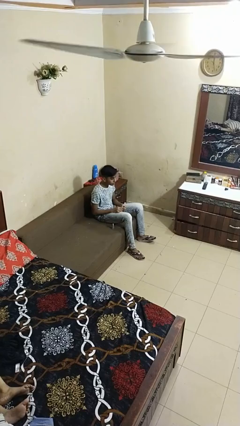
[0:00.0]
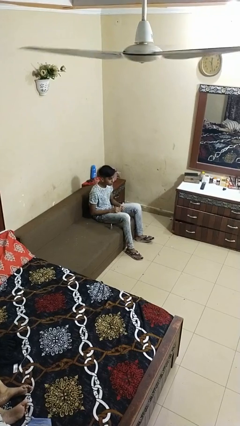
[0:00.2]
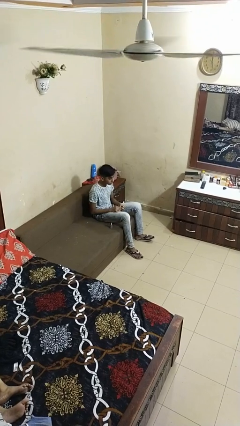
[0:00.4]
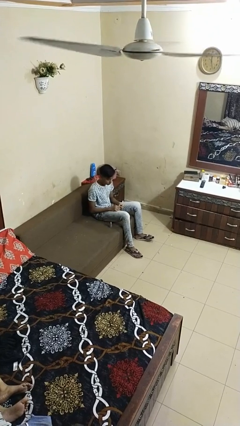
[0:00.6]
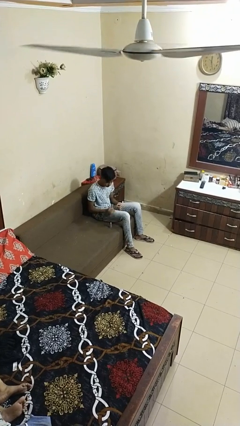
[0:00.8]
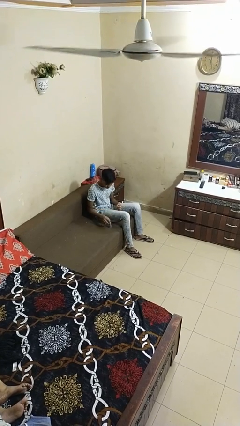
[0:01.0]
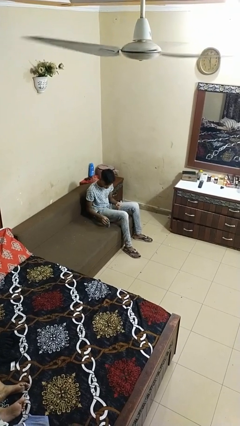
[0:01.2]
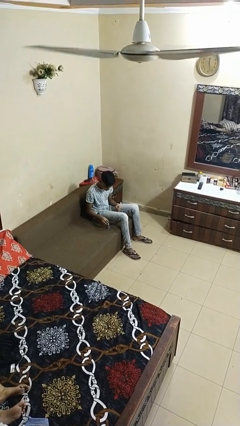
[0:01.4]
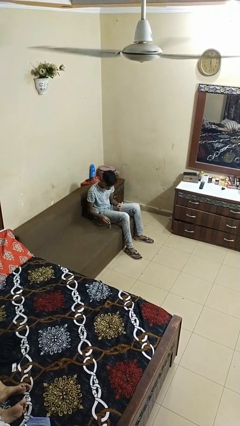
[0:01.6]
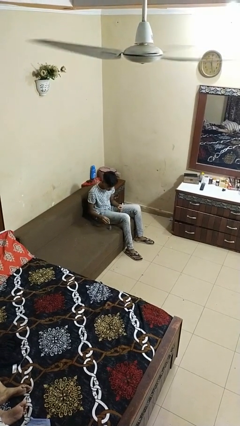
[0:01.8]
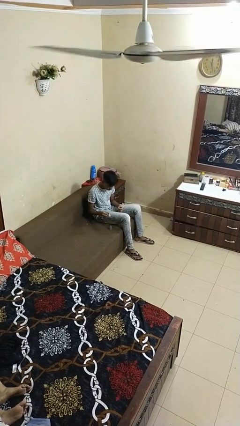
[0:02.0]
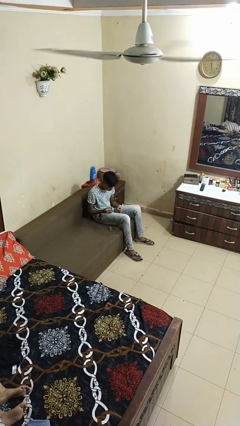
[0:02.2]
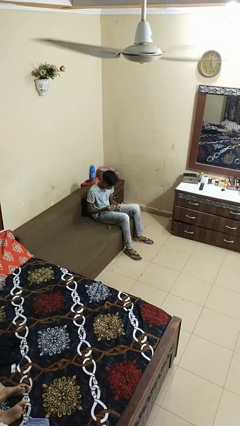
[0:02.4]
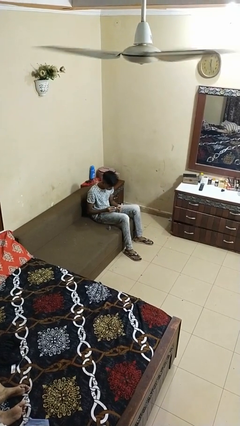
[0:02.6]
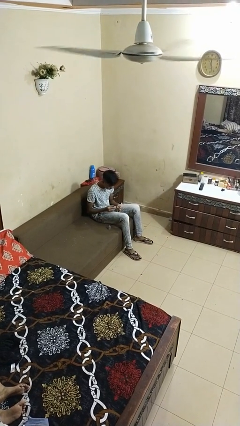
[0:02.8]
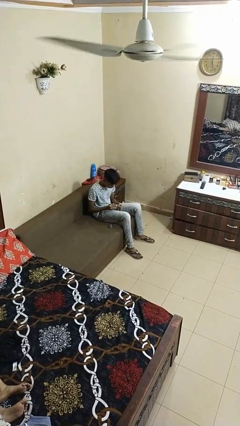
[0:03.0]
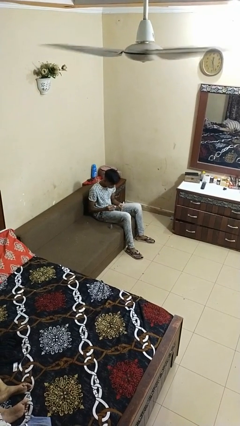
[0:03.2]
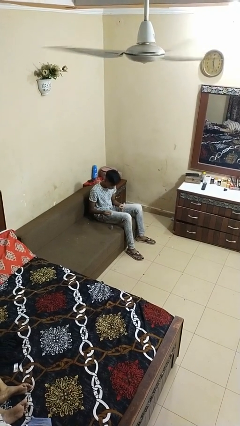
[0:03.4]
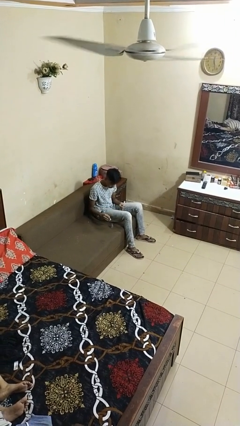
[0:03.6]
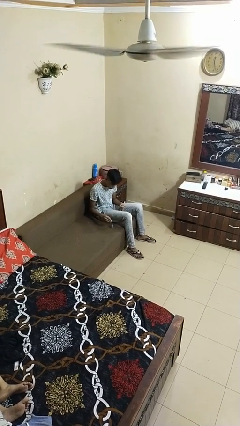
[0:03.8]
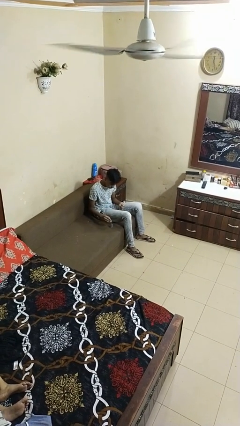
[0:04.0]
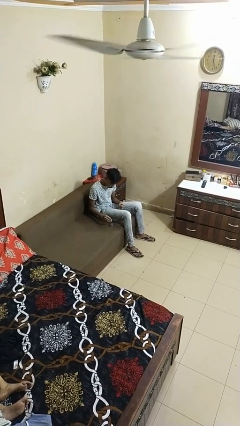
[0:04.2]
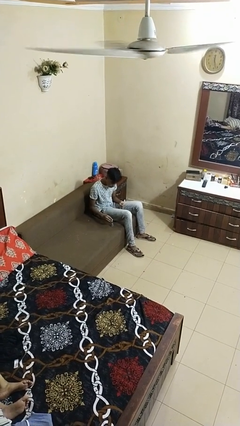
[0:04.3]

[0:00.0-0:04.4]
person paints fingernails

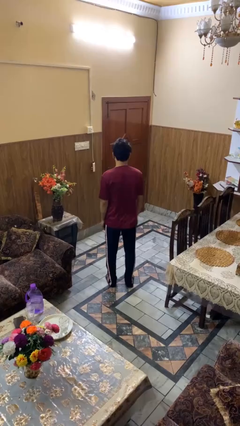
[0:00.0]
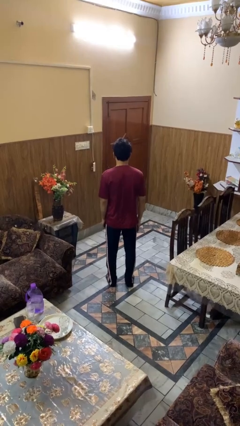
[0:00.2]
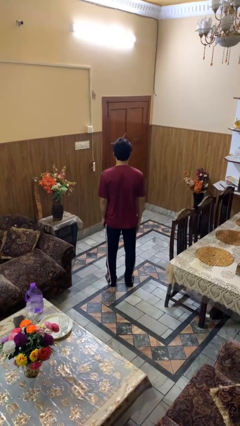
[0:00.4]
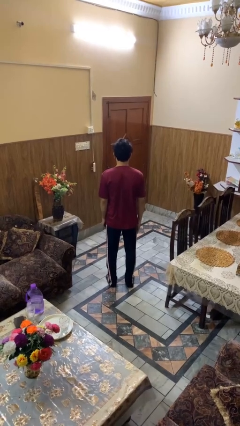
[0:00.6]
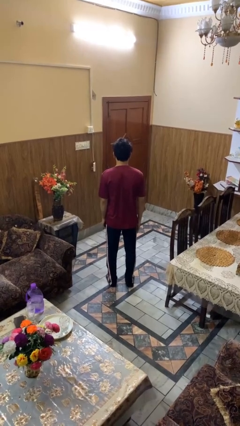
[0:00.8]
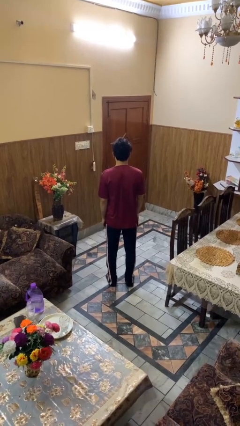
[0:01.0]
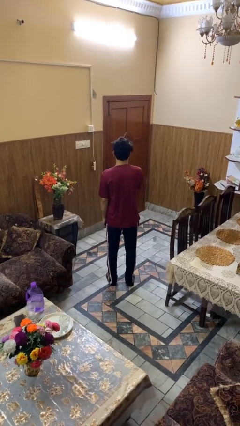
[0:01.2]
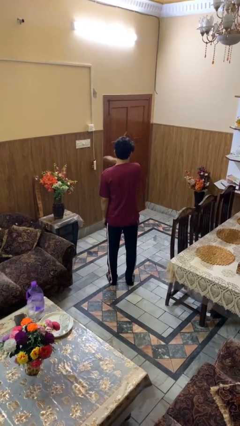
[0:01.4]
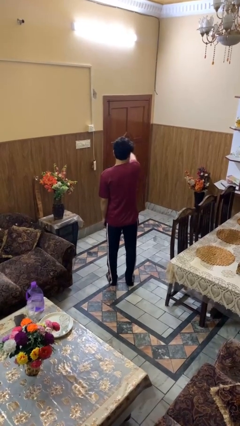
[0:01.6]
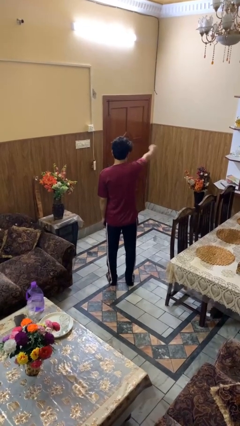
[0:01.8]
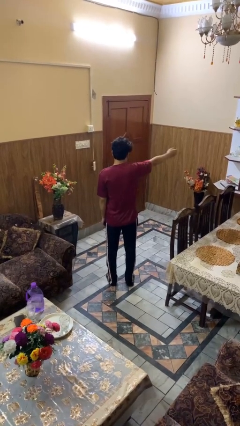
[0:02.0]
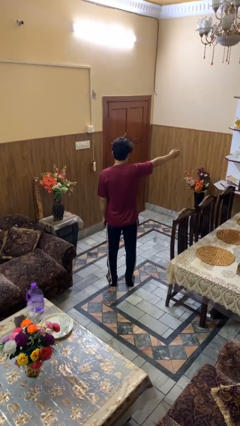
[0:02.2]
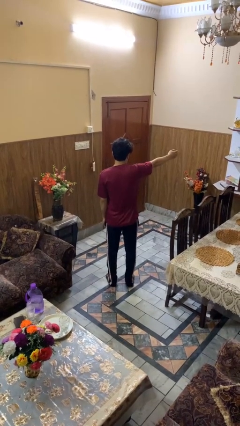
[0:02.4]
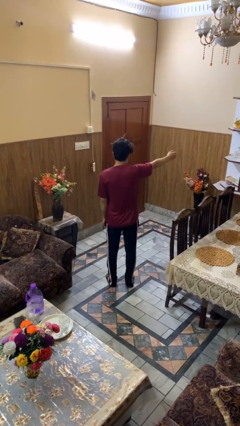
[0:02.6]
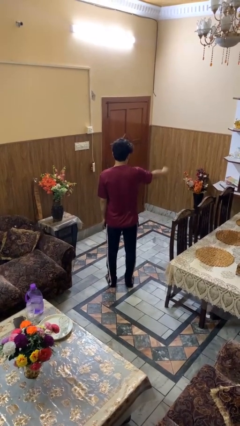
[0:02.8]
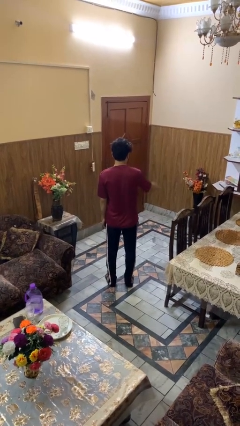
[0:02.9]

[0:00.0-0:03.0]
person gestures swipe right

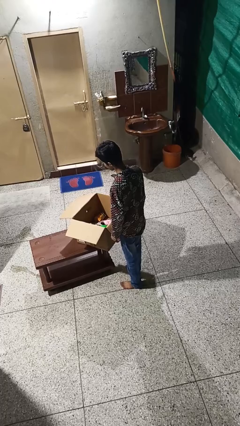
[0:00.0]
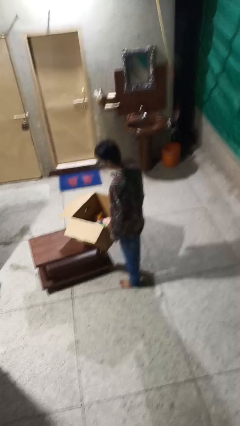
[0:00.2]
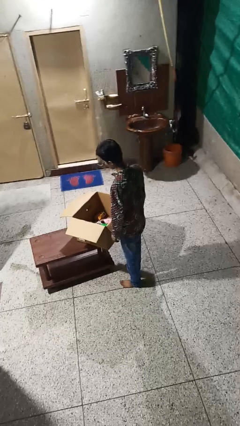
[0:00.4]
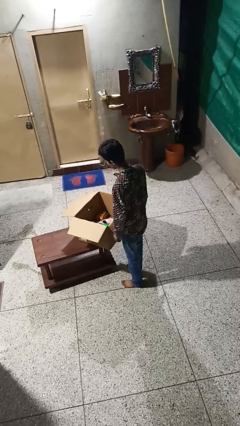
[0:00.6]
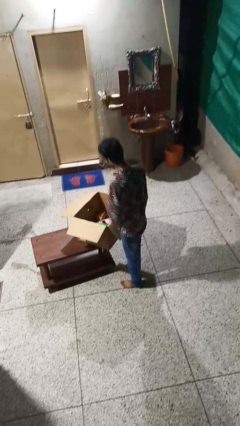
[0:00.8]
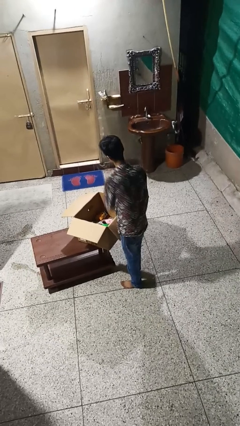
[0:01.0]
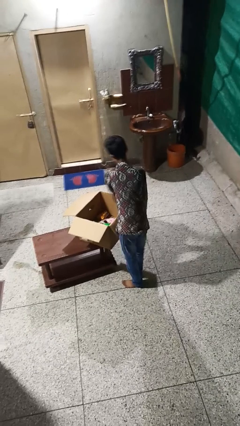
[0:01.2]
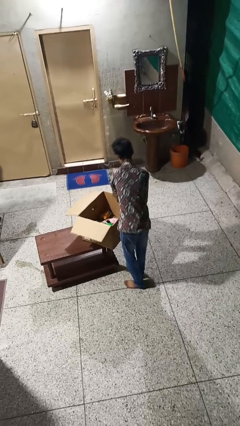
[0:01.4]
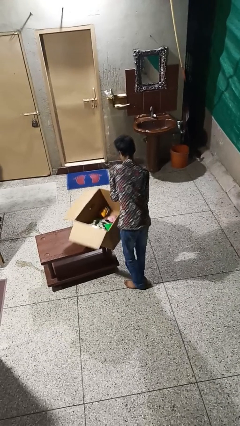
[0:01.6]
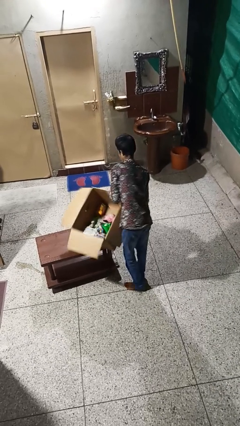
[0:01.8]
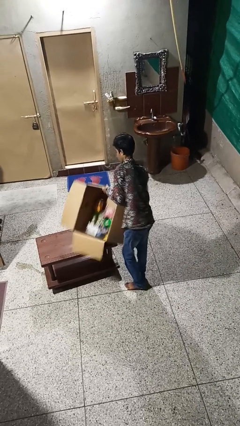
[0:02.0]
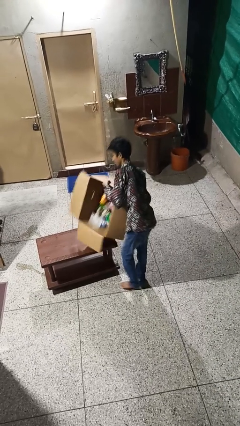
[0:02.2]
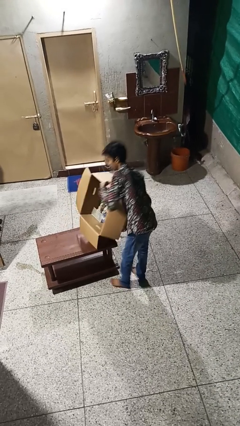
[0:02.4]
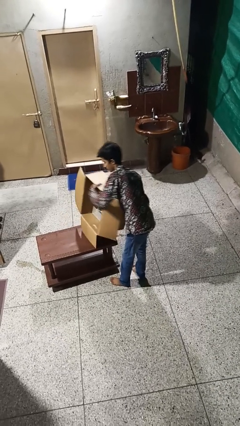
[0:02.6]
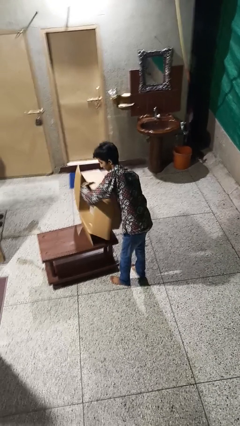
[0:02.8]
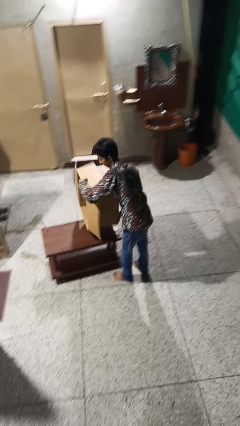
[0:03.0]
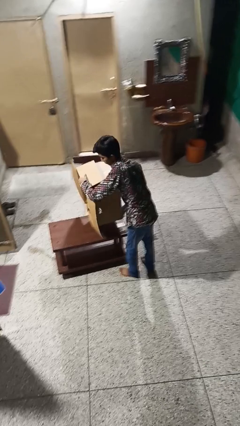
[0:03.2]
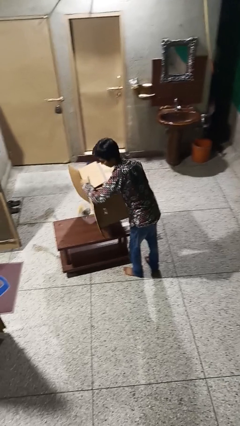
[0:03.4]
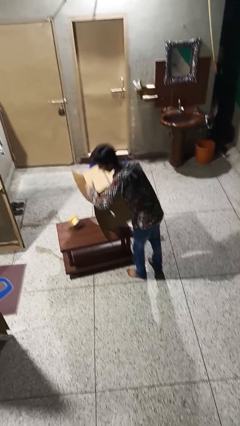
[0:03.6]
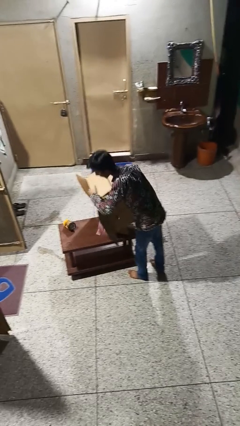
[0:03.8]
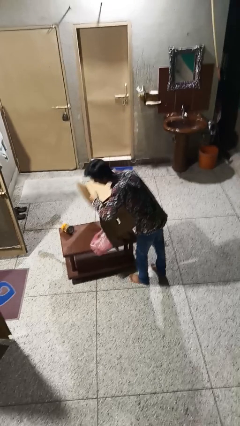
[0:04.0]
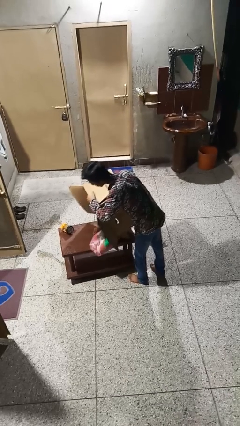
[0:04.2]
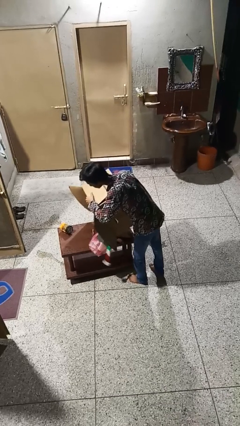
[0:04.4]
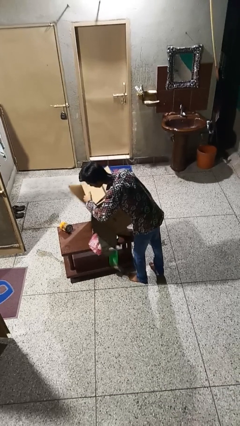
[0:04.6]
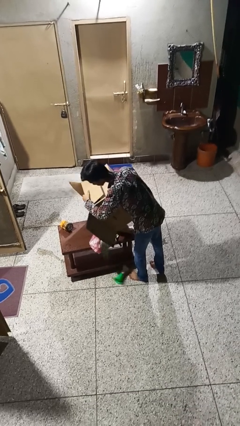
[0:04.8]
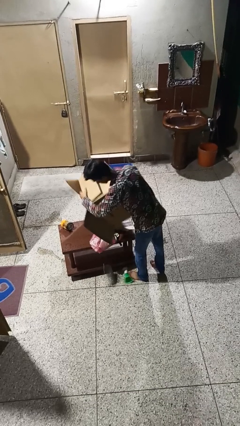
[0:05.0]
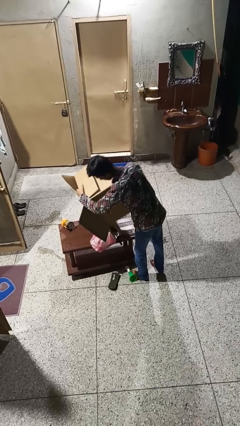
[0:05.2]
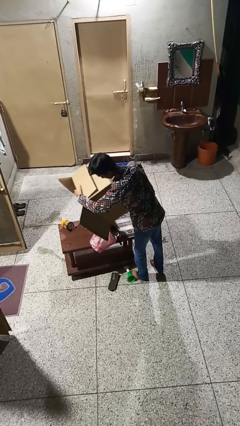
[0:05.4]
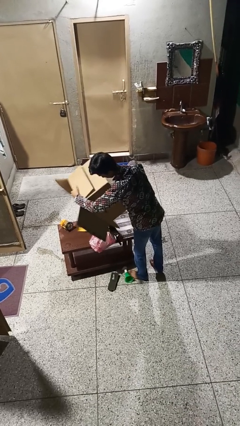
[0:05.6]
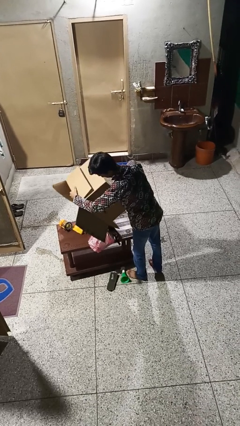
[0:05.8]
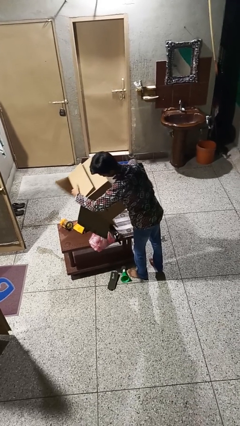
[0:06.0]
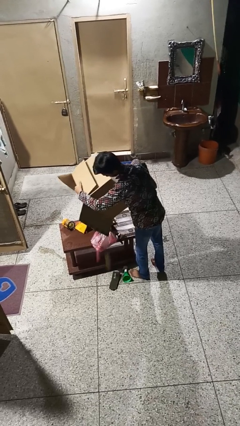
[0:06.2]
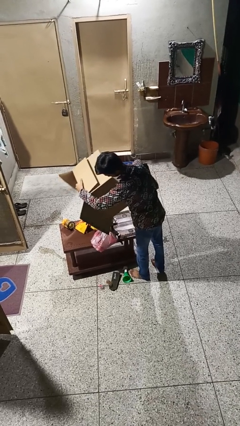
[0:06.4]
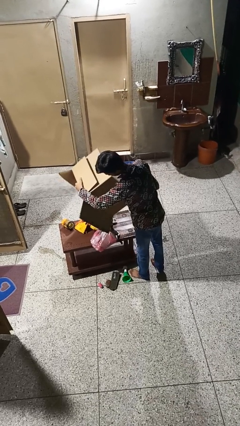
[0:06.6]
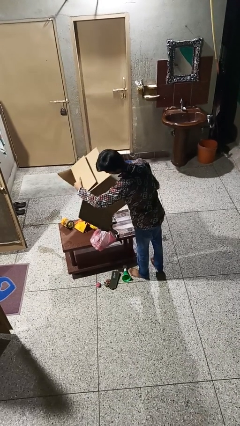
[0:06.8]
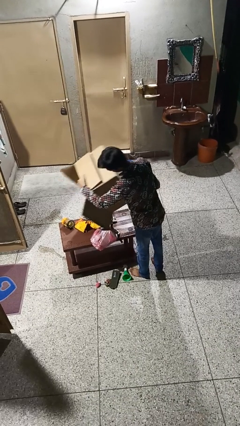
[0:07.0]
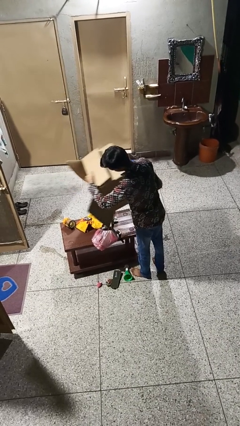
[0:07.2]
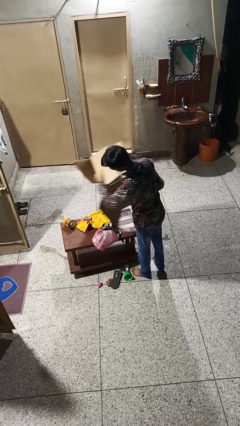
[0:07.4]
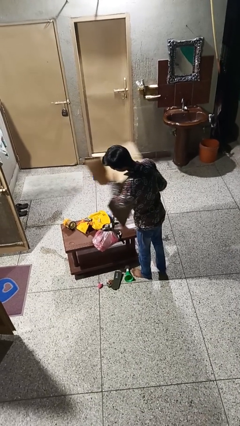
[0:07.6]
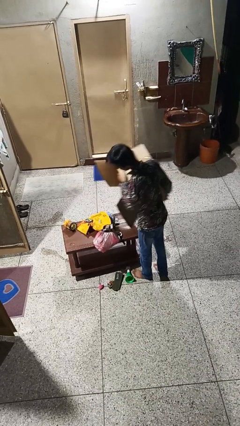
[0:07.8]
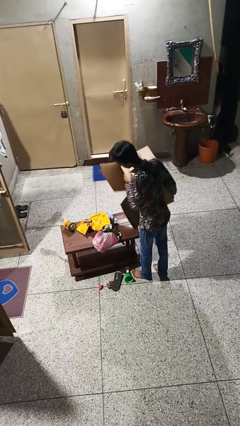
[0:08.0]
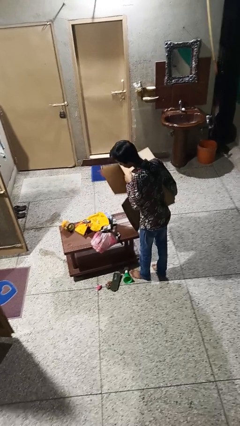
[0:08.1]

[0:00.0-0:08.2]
person unloads box onto table

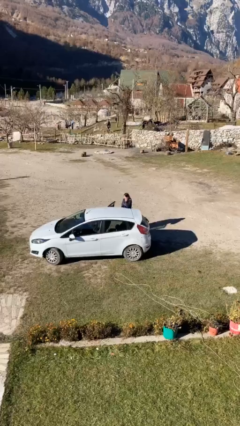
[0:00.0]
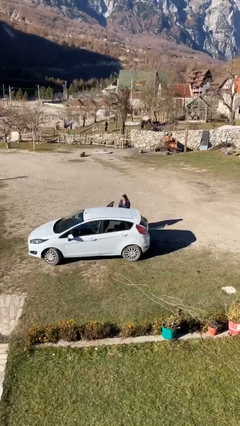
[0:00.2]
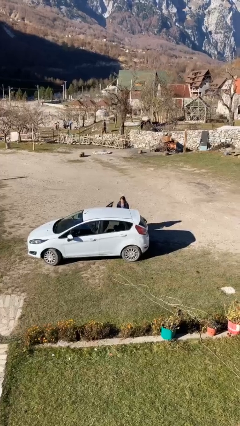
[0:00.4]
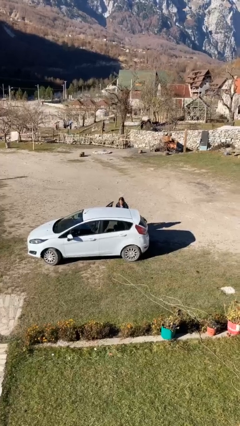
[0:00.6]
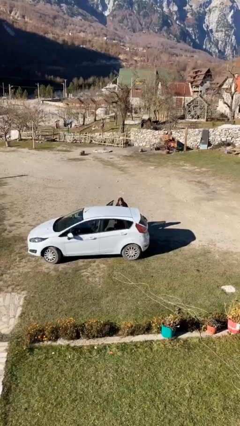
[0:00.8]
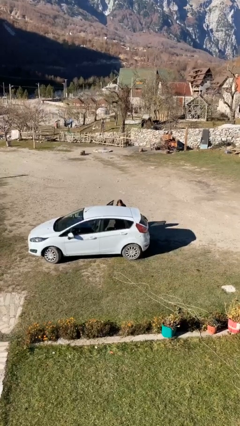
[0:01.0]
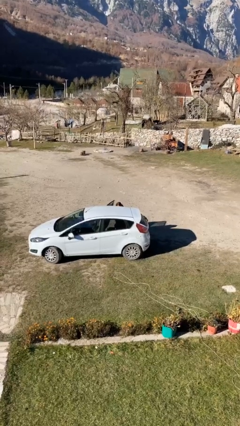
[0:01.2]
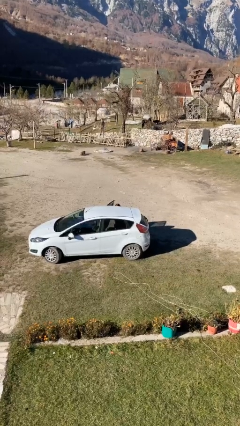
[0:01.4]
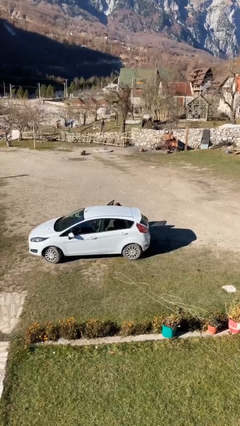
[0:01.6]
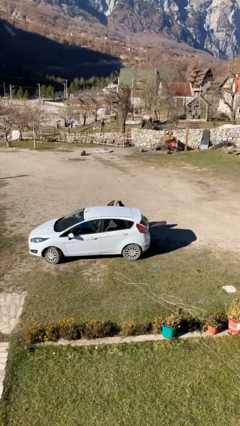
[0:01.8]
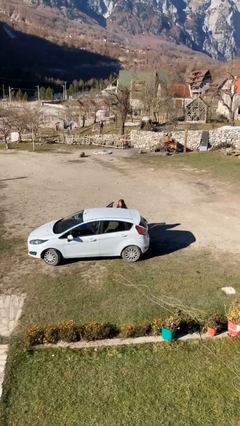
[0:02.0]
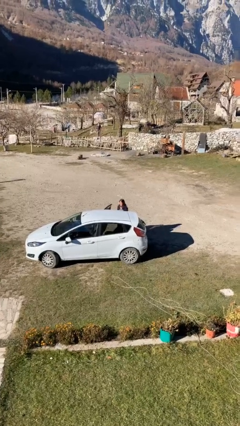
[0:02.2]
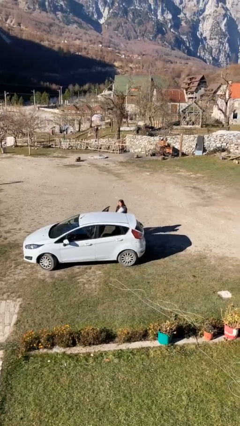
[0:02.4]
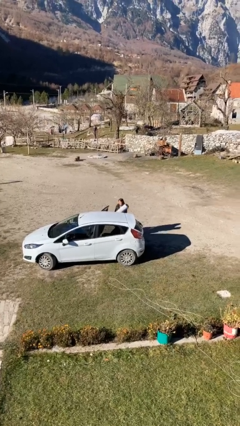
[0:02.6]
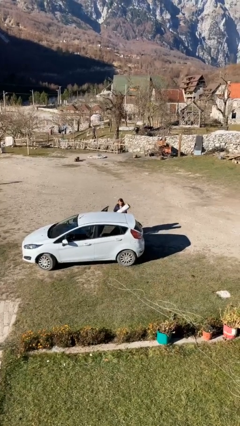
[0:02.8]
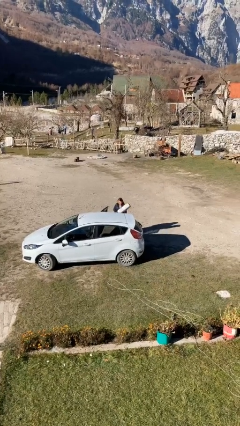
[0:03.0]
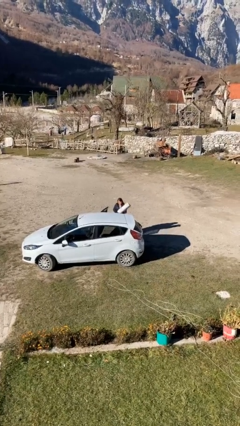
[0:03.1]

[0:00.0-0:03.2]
person unloads car
